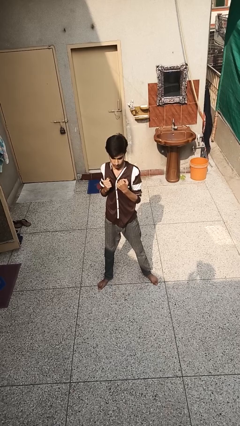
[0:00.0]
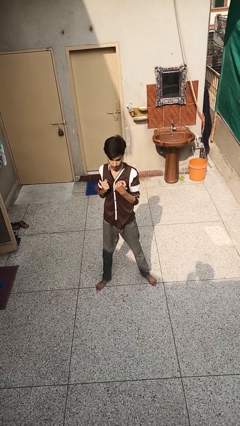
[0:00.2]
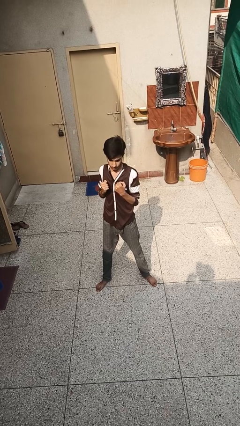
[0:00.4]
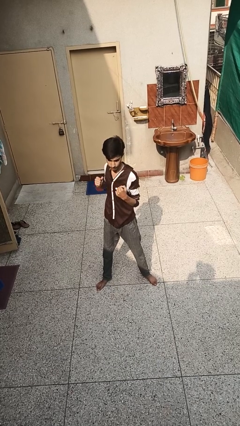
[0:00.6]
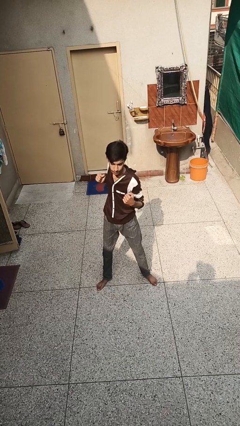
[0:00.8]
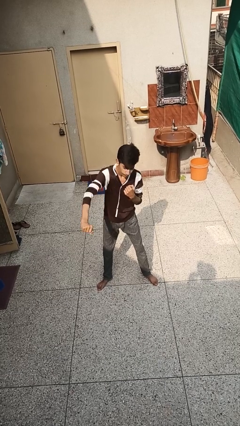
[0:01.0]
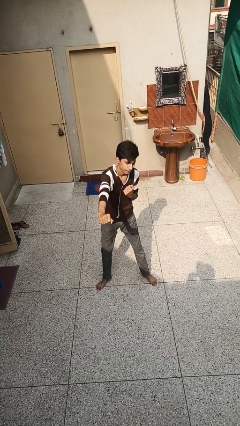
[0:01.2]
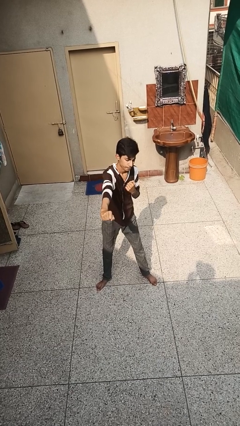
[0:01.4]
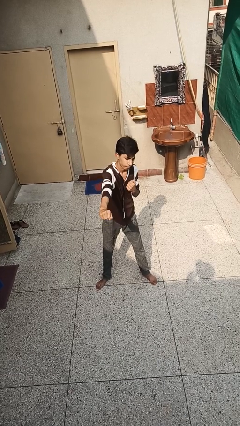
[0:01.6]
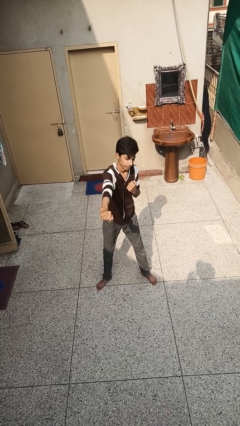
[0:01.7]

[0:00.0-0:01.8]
person punches

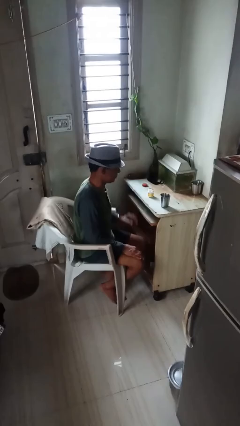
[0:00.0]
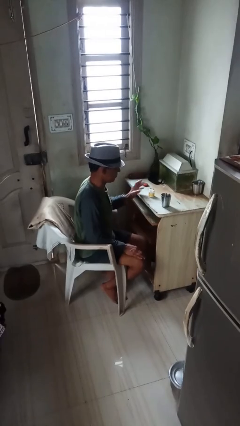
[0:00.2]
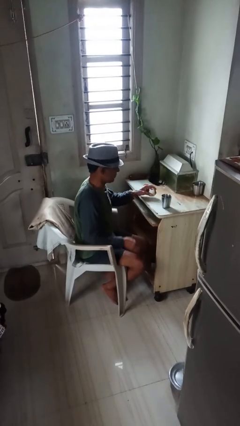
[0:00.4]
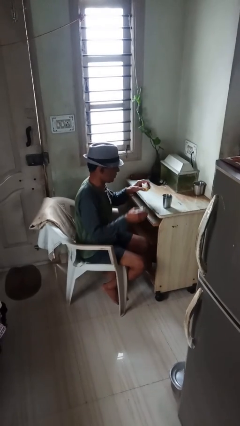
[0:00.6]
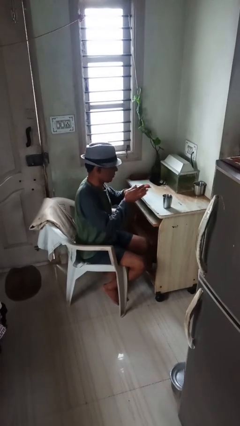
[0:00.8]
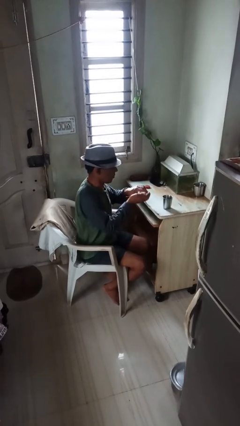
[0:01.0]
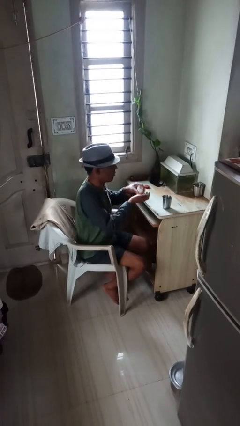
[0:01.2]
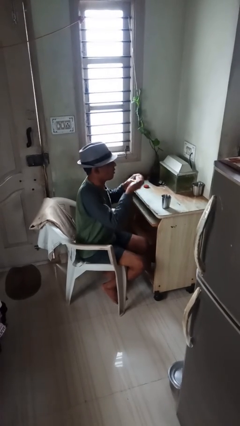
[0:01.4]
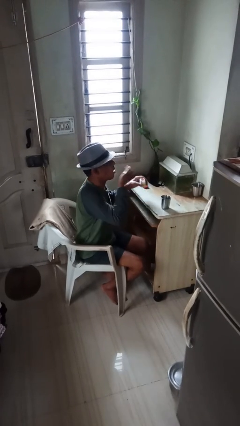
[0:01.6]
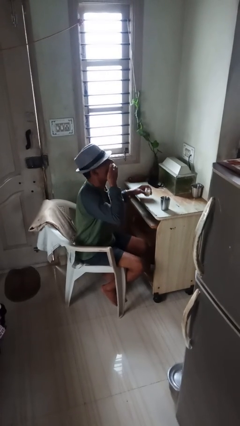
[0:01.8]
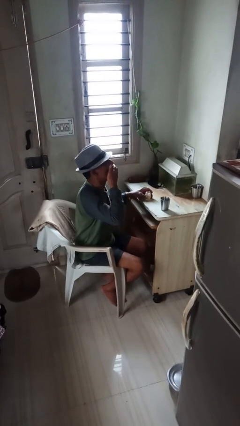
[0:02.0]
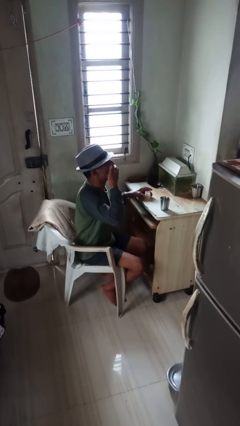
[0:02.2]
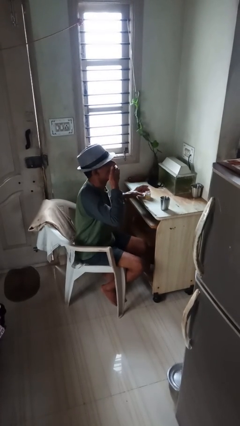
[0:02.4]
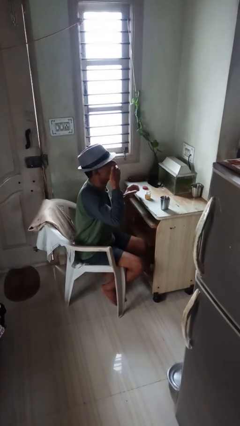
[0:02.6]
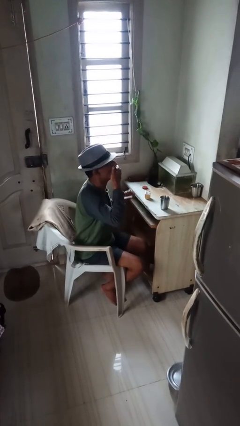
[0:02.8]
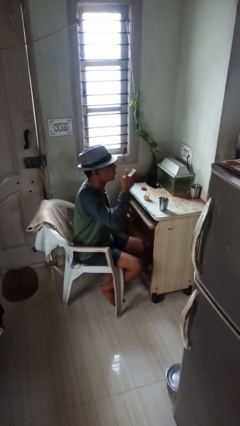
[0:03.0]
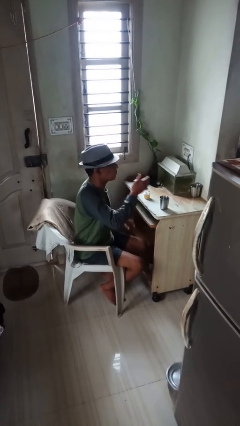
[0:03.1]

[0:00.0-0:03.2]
person takes medicine pills

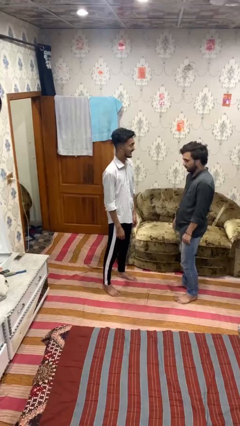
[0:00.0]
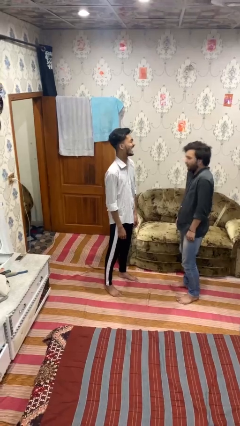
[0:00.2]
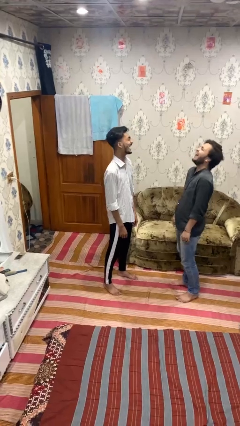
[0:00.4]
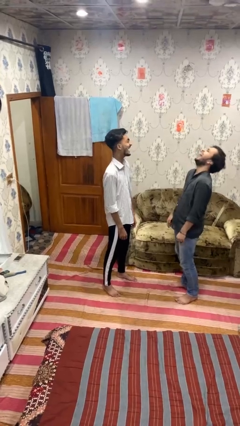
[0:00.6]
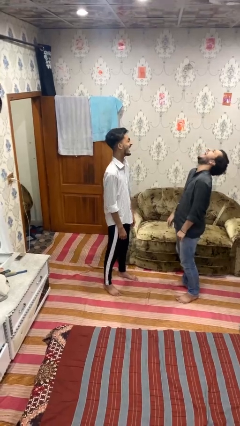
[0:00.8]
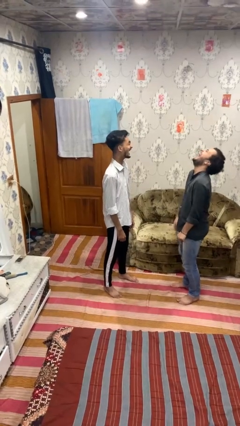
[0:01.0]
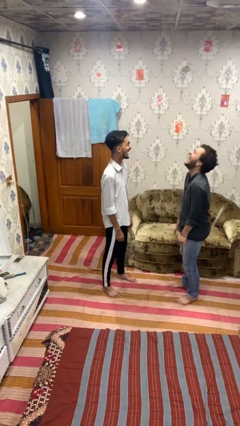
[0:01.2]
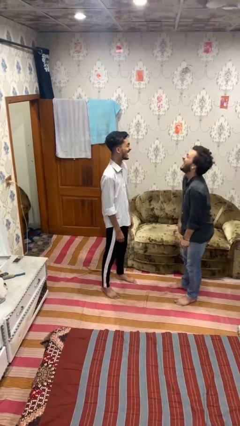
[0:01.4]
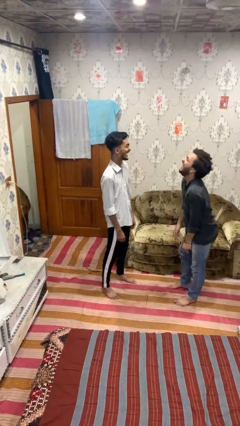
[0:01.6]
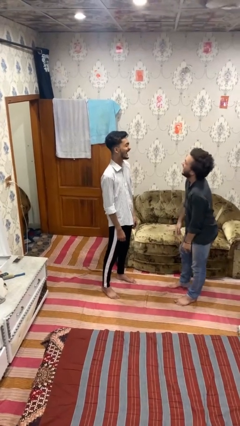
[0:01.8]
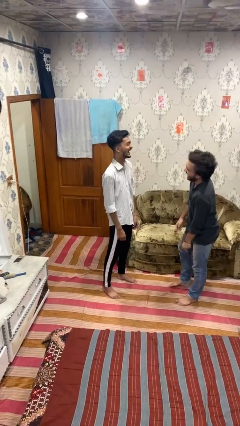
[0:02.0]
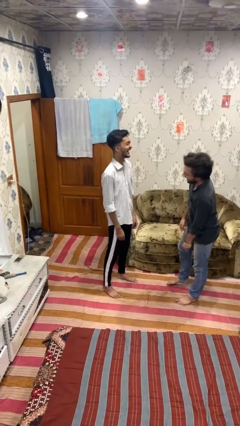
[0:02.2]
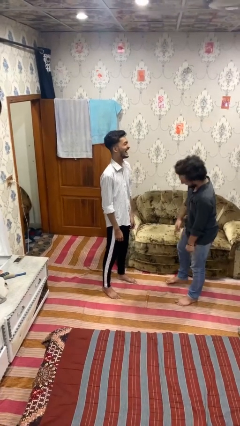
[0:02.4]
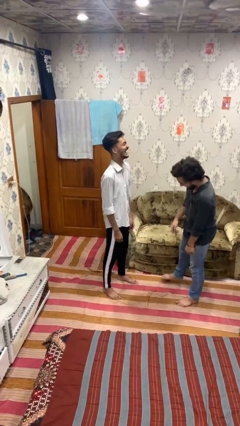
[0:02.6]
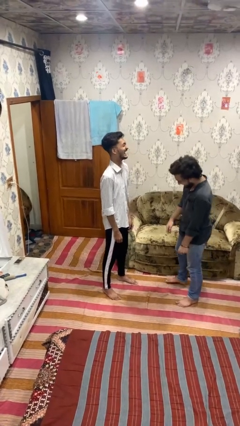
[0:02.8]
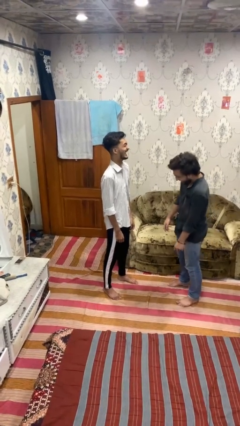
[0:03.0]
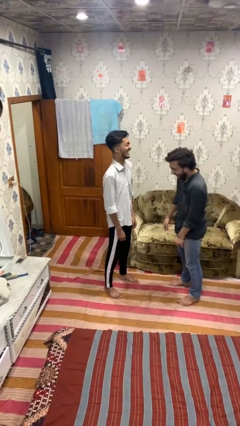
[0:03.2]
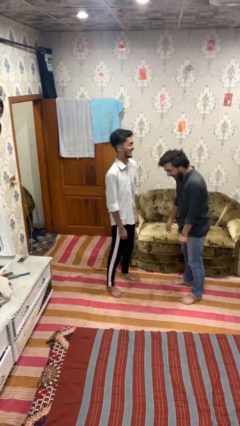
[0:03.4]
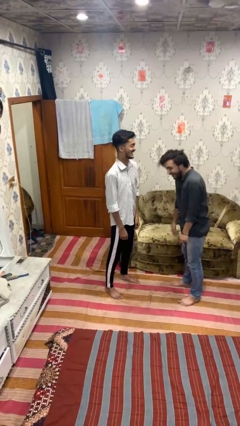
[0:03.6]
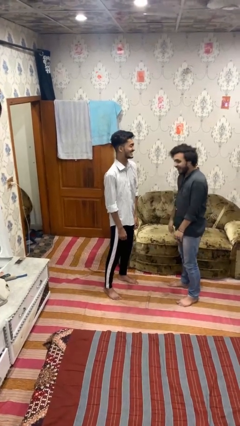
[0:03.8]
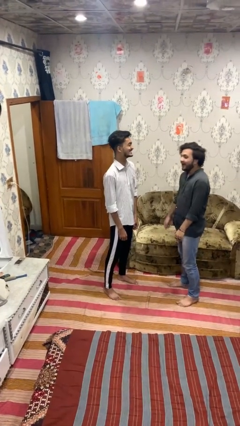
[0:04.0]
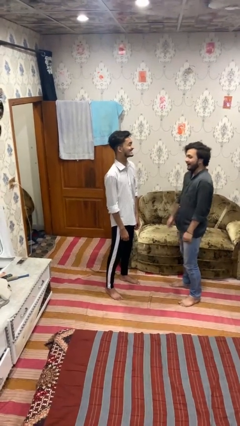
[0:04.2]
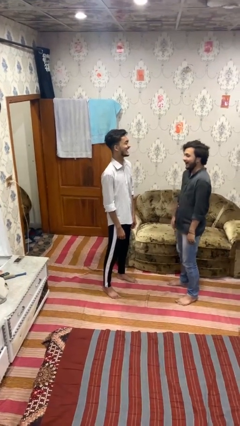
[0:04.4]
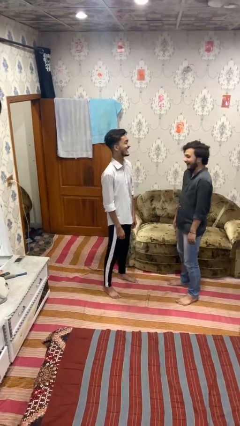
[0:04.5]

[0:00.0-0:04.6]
person laughs with person

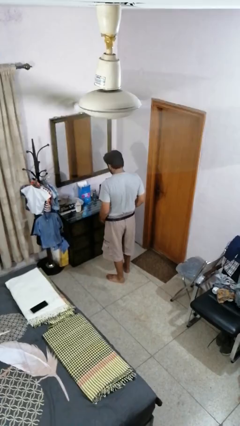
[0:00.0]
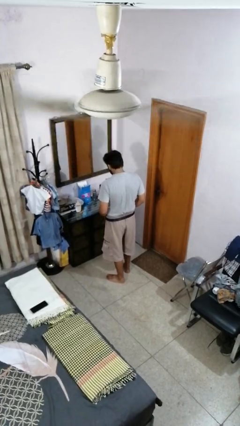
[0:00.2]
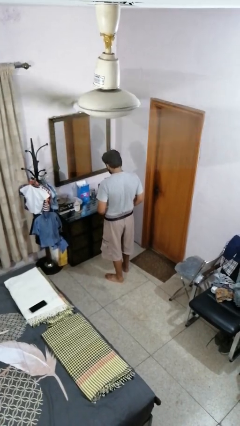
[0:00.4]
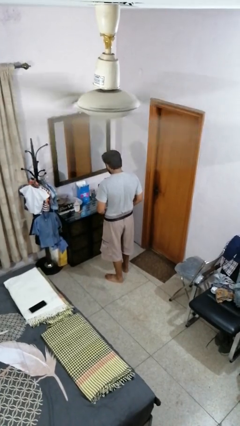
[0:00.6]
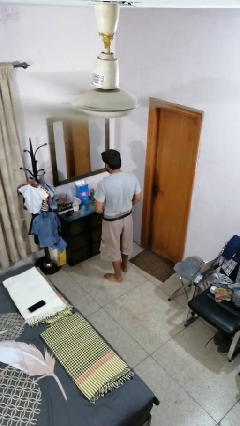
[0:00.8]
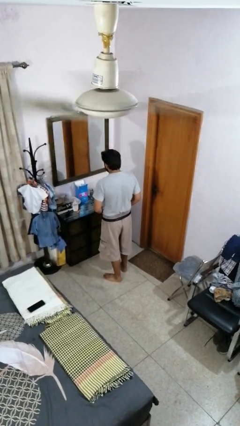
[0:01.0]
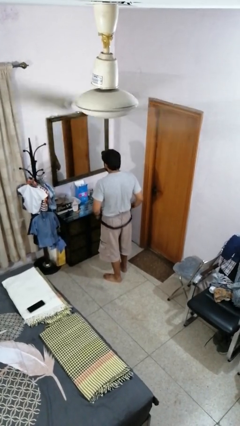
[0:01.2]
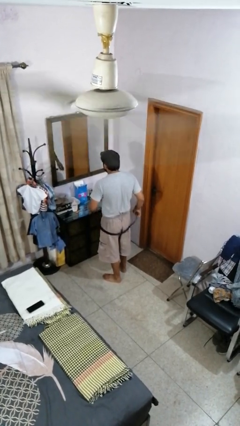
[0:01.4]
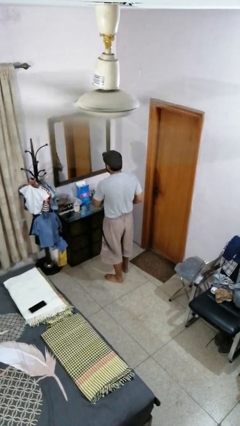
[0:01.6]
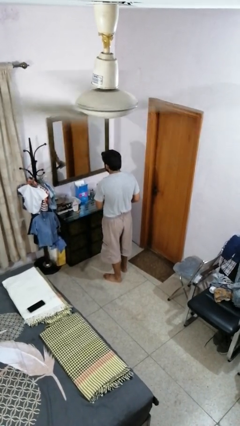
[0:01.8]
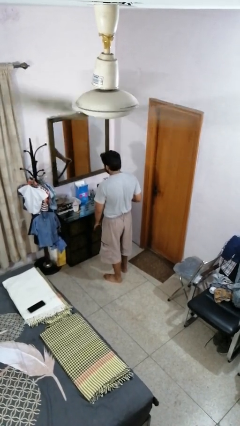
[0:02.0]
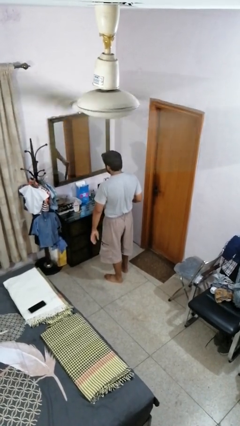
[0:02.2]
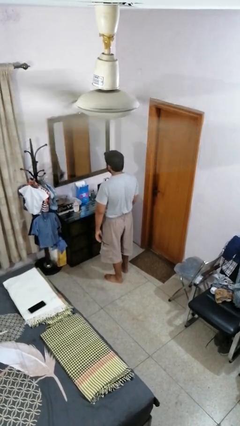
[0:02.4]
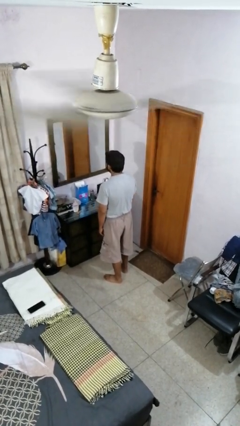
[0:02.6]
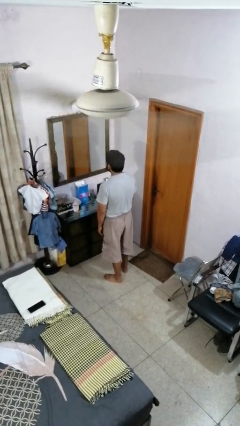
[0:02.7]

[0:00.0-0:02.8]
person takes off belt

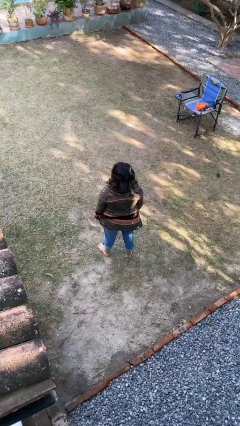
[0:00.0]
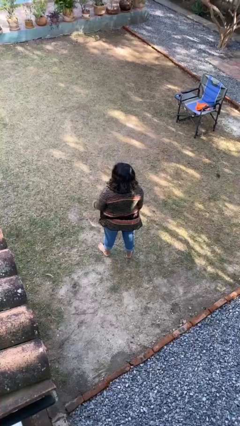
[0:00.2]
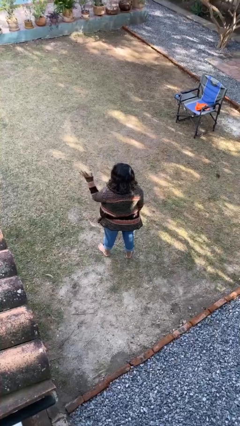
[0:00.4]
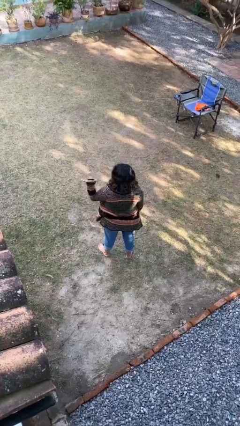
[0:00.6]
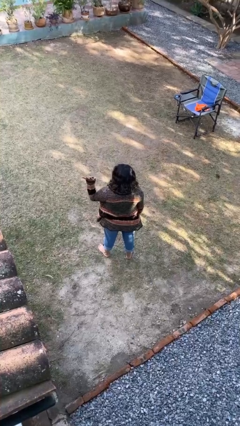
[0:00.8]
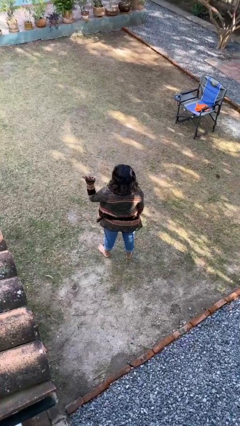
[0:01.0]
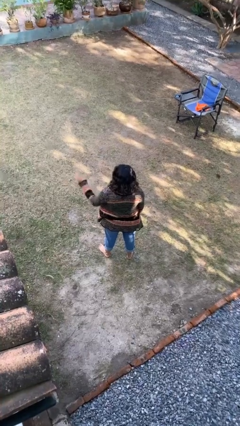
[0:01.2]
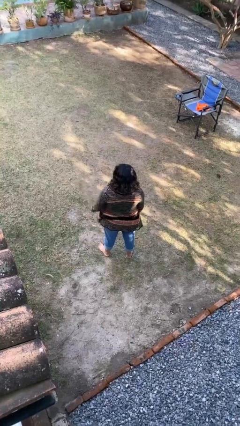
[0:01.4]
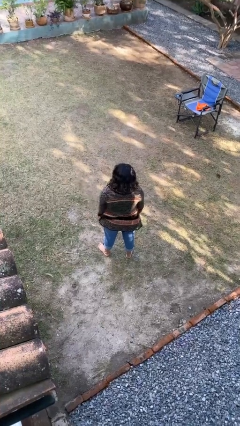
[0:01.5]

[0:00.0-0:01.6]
person gestures number five

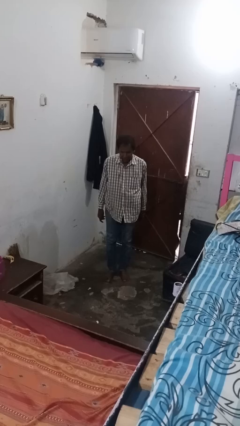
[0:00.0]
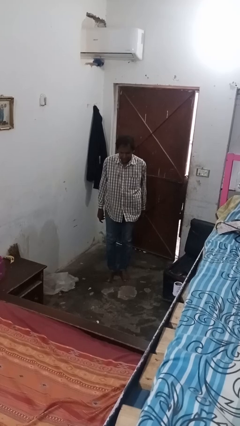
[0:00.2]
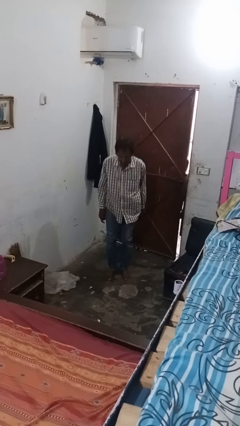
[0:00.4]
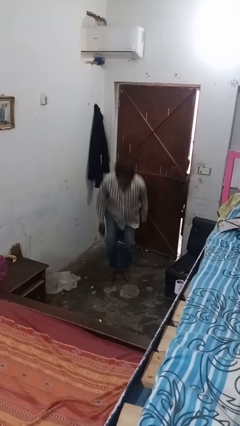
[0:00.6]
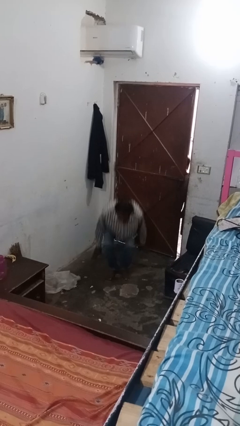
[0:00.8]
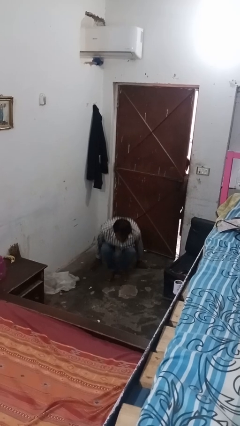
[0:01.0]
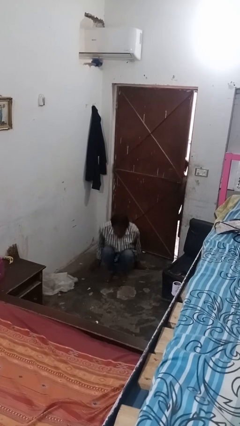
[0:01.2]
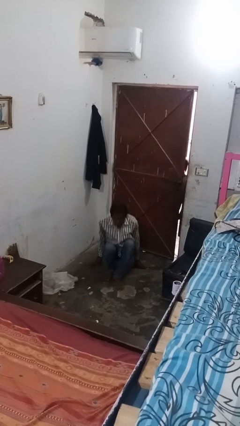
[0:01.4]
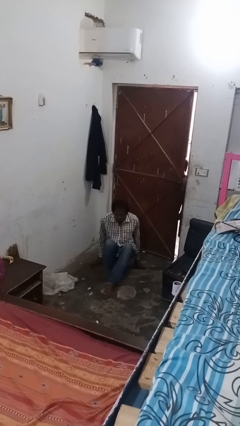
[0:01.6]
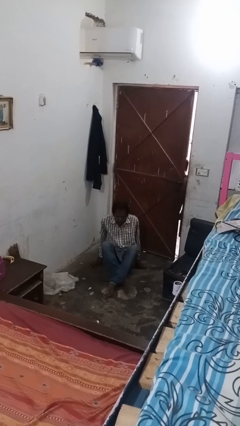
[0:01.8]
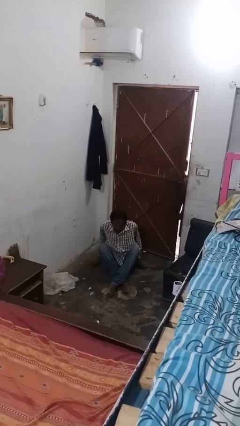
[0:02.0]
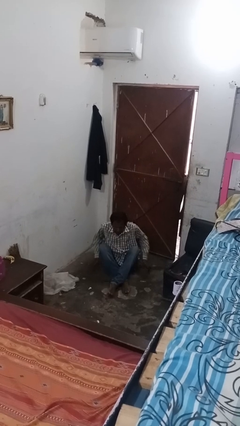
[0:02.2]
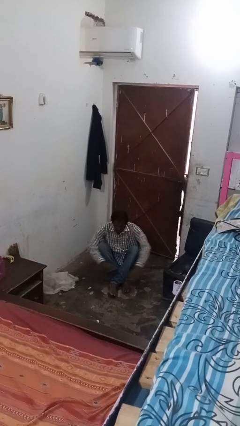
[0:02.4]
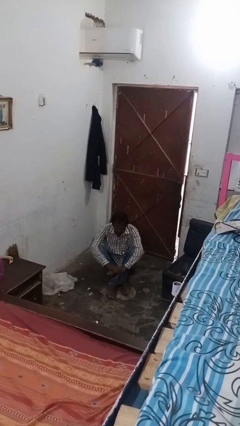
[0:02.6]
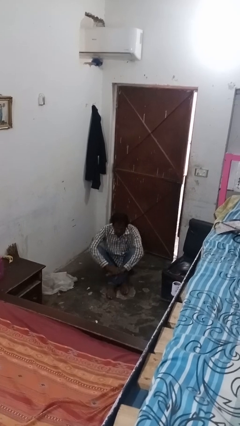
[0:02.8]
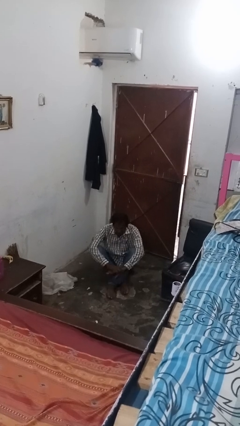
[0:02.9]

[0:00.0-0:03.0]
person sits crisscross

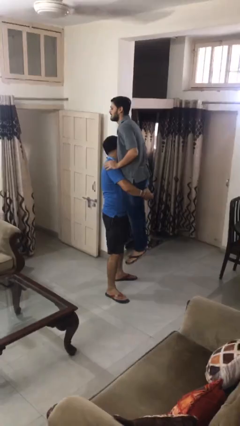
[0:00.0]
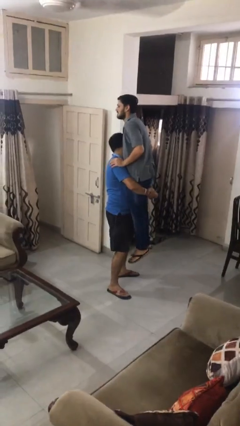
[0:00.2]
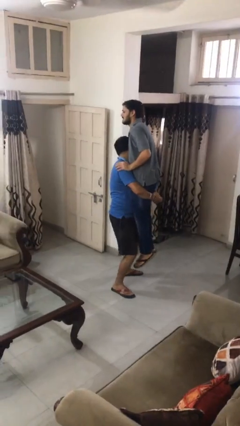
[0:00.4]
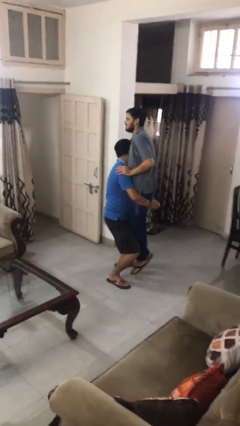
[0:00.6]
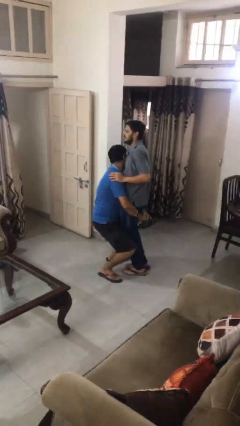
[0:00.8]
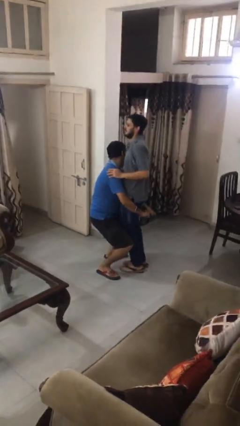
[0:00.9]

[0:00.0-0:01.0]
person puts down person
